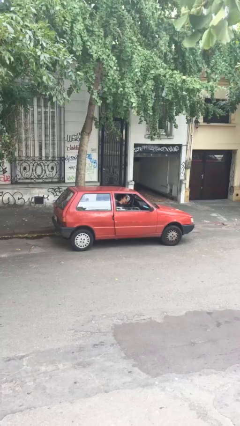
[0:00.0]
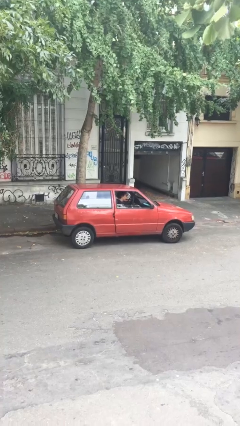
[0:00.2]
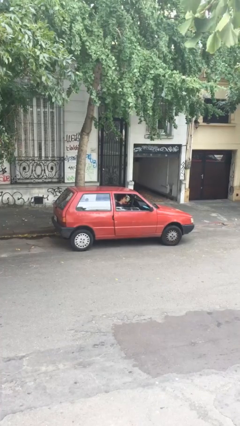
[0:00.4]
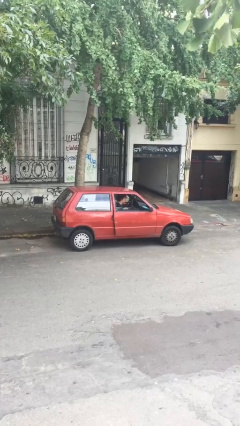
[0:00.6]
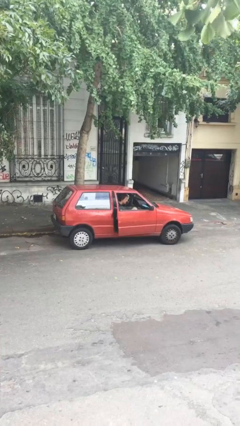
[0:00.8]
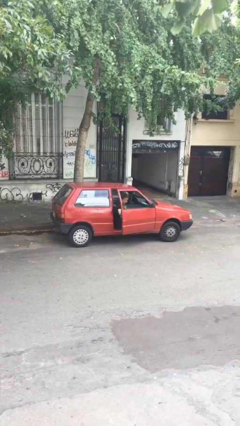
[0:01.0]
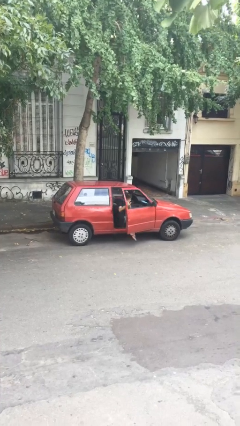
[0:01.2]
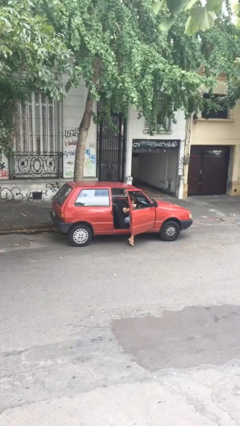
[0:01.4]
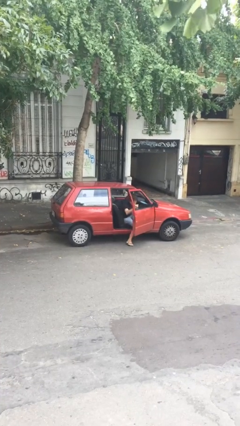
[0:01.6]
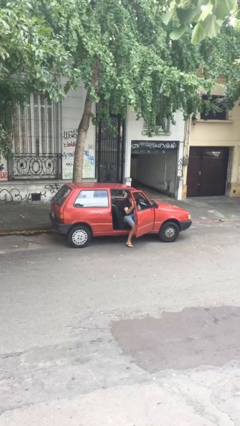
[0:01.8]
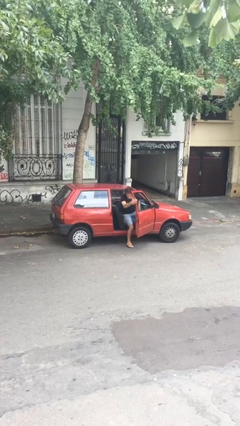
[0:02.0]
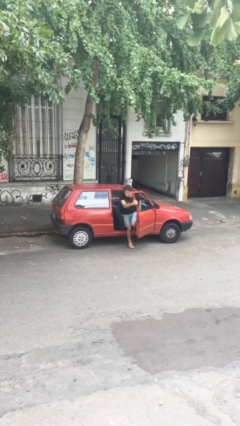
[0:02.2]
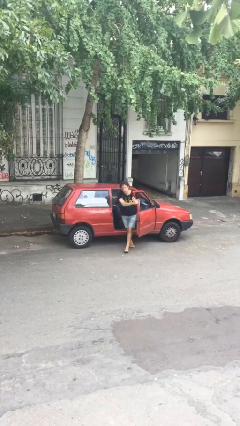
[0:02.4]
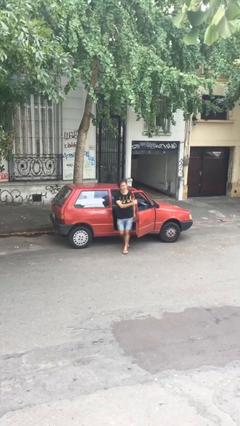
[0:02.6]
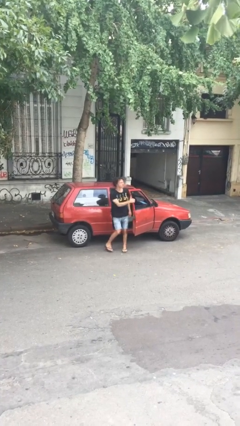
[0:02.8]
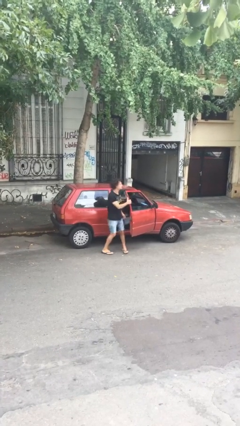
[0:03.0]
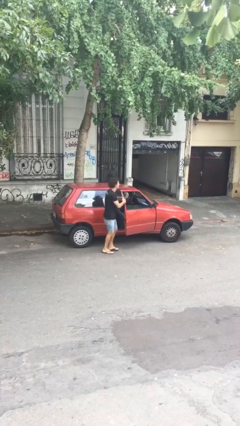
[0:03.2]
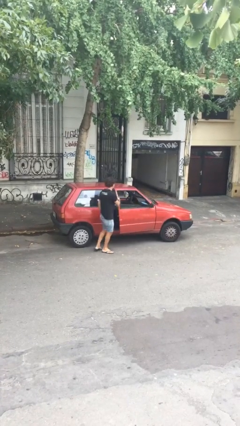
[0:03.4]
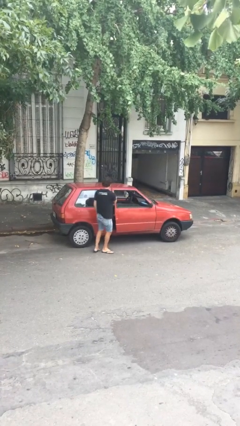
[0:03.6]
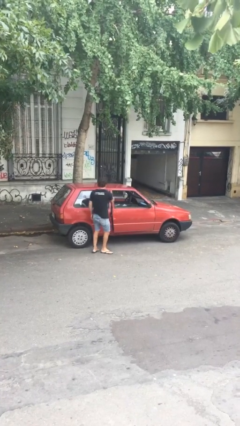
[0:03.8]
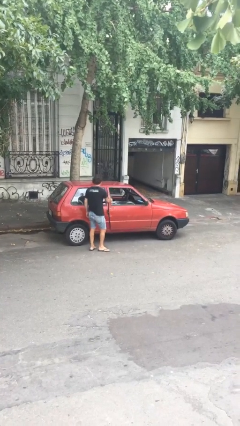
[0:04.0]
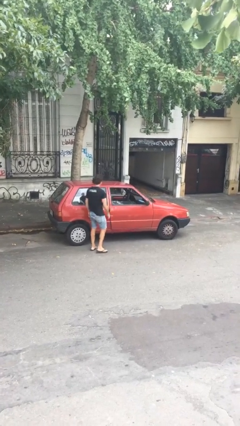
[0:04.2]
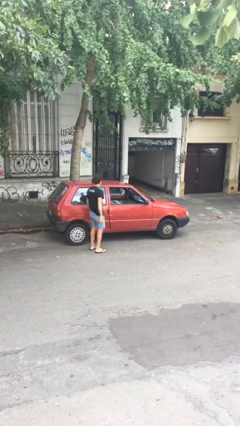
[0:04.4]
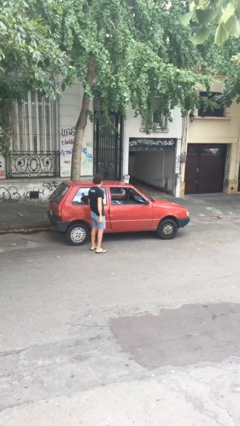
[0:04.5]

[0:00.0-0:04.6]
car drops off person

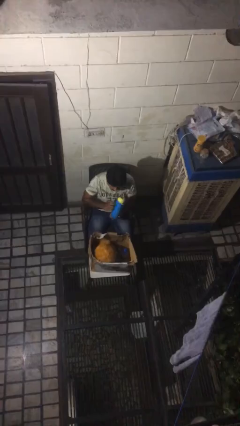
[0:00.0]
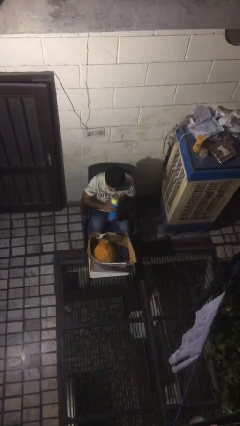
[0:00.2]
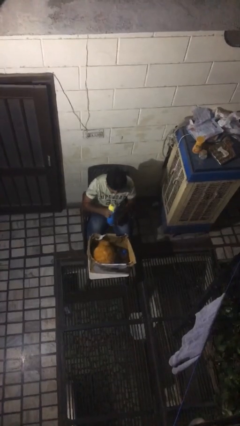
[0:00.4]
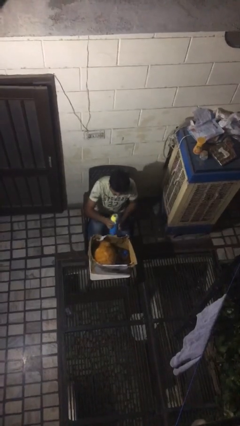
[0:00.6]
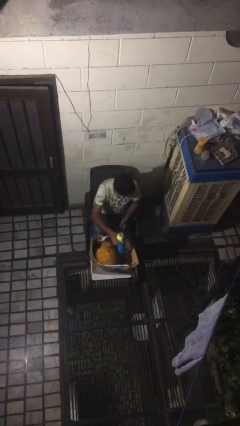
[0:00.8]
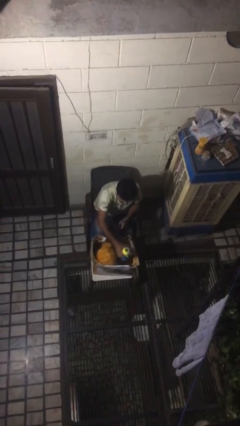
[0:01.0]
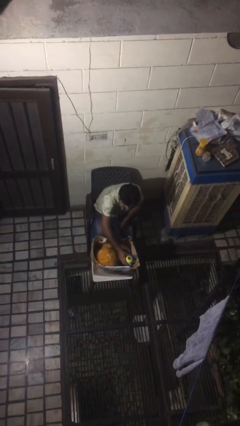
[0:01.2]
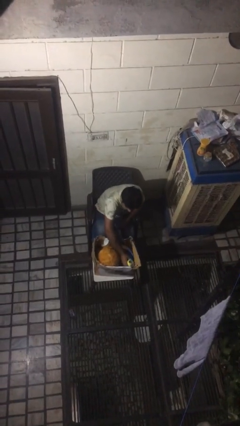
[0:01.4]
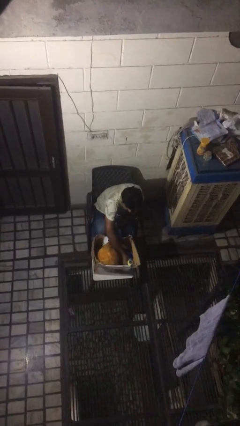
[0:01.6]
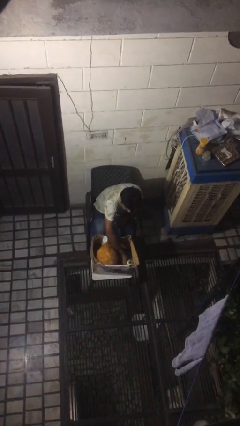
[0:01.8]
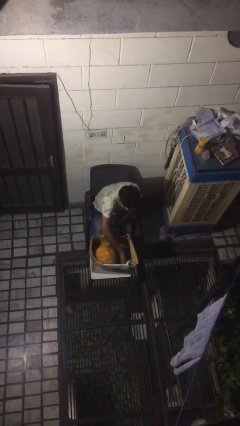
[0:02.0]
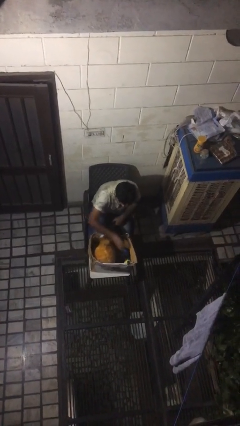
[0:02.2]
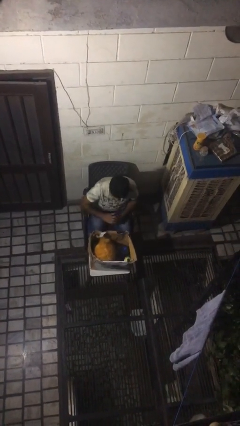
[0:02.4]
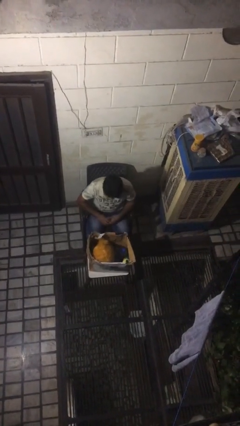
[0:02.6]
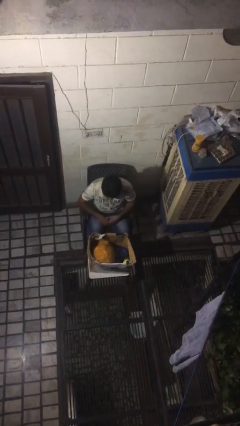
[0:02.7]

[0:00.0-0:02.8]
person puts object into box

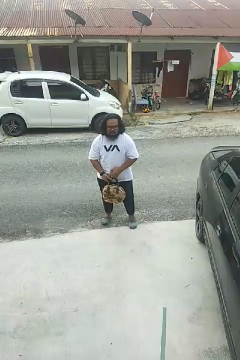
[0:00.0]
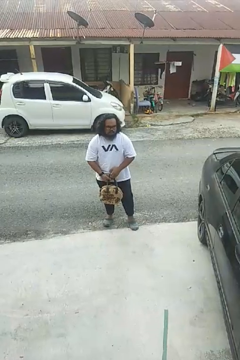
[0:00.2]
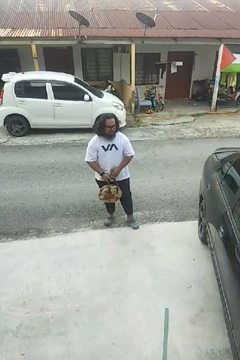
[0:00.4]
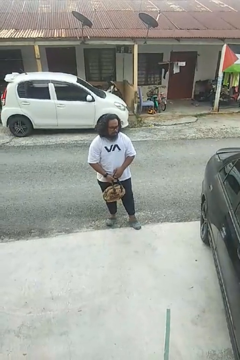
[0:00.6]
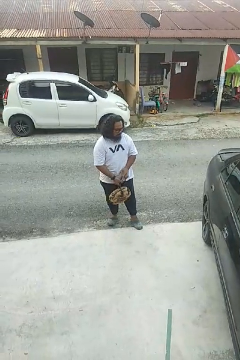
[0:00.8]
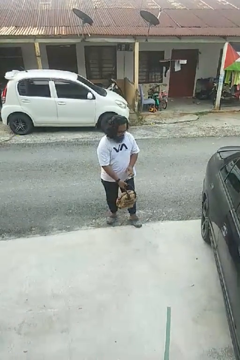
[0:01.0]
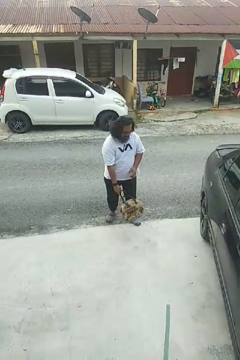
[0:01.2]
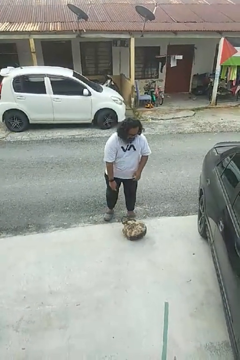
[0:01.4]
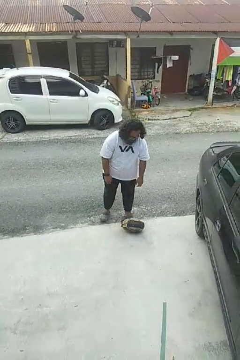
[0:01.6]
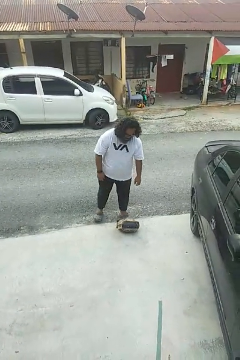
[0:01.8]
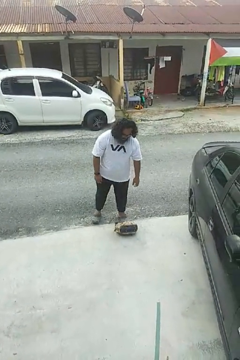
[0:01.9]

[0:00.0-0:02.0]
person drops object

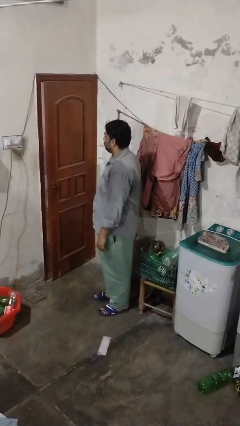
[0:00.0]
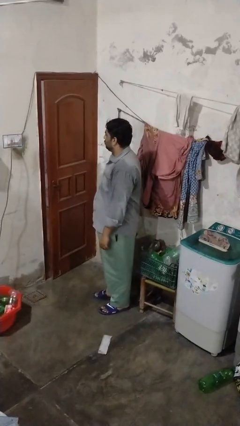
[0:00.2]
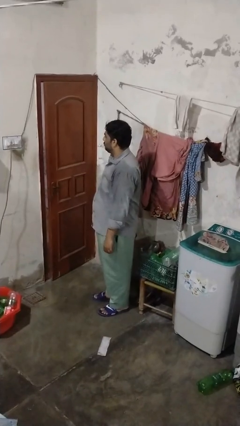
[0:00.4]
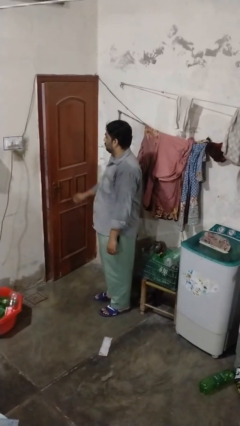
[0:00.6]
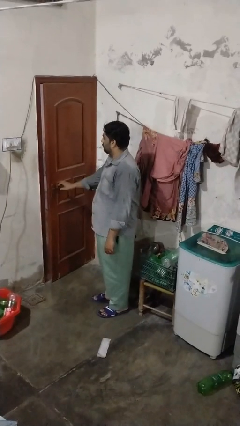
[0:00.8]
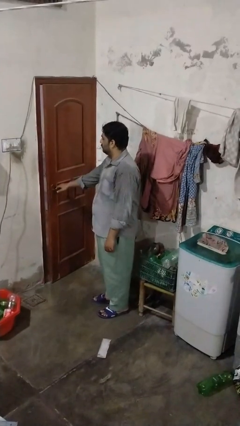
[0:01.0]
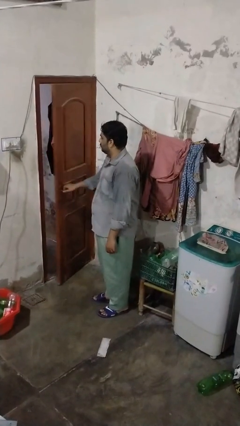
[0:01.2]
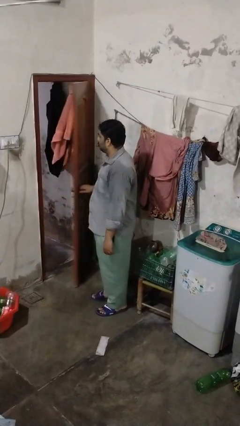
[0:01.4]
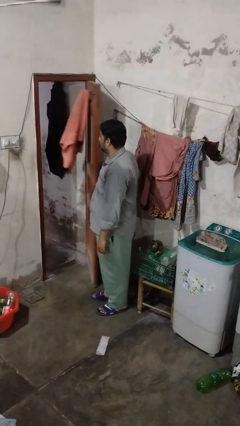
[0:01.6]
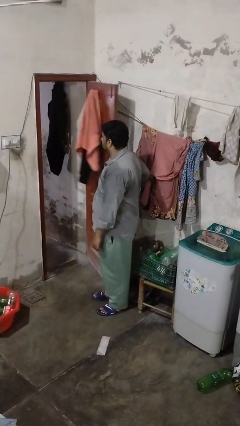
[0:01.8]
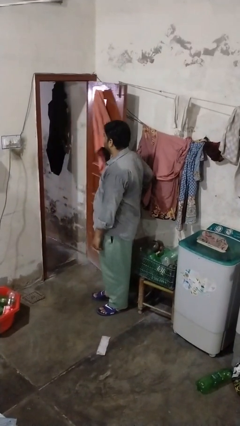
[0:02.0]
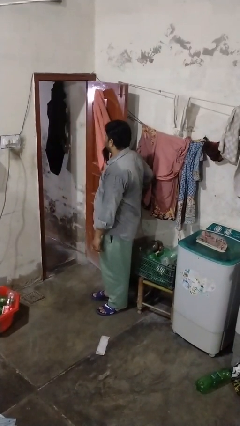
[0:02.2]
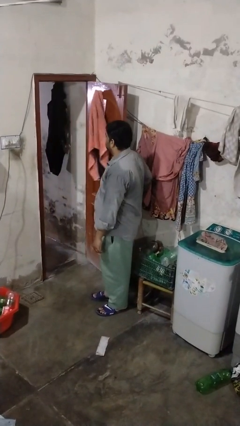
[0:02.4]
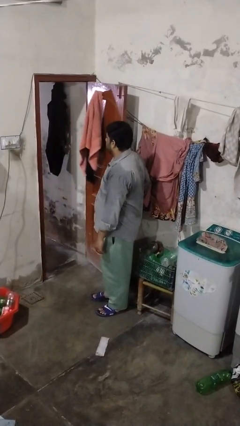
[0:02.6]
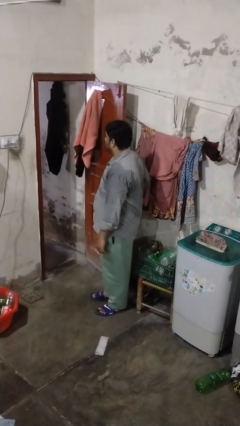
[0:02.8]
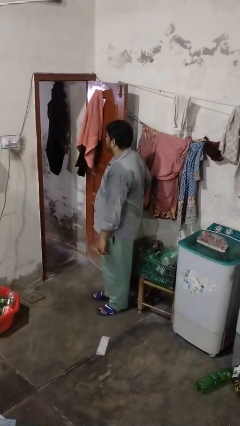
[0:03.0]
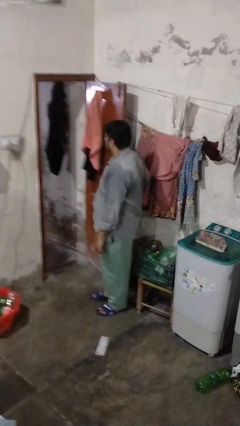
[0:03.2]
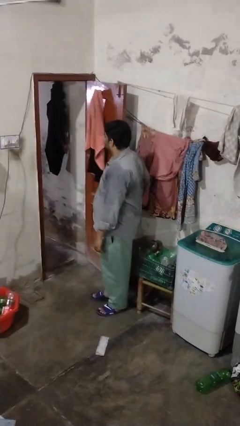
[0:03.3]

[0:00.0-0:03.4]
person opens closet door

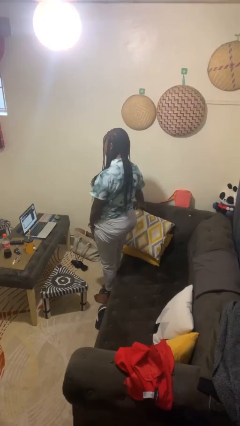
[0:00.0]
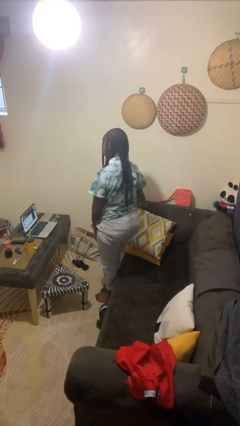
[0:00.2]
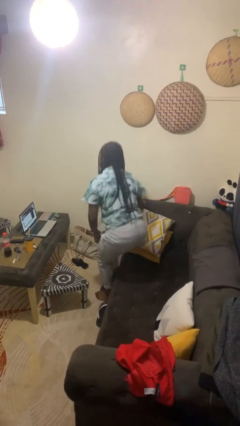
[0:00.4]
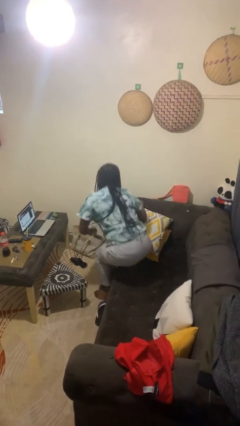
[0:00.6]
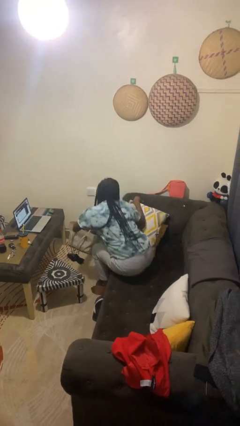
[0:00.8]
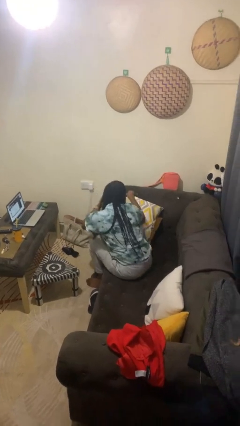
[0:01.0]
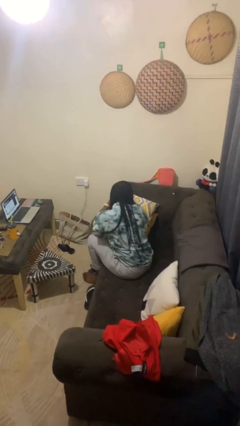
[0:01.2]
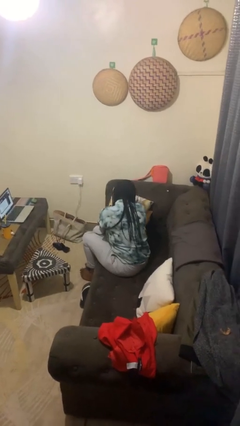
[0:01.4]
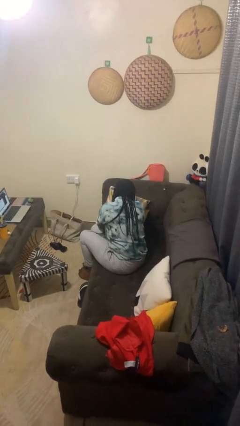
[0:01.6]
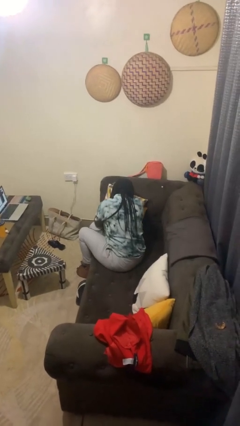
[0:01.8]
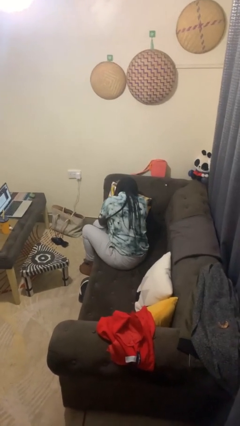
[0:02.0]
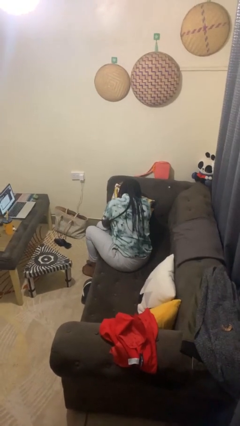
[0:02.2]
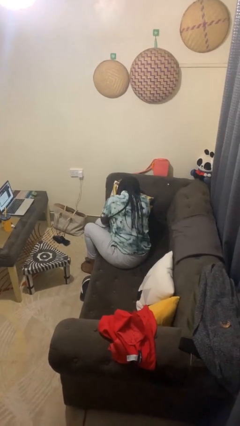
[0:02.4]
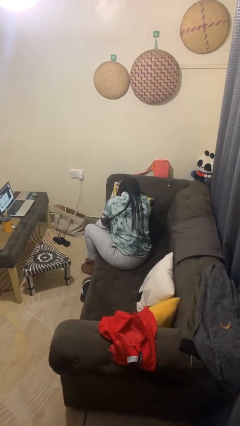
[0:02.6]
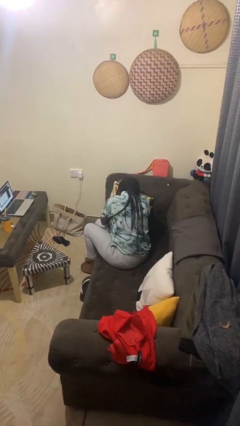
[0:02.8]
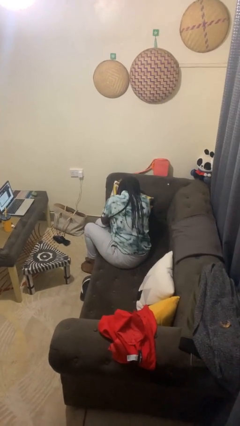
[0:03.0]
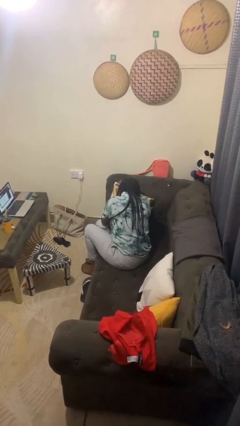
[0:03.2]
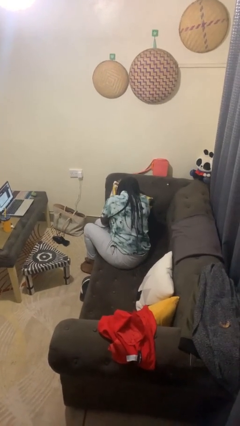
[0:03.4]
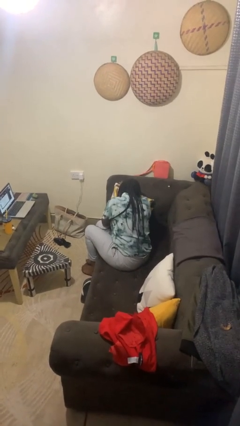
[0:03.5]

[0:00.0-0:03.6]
person lies down on couch

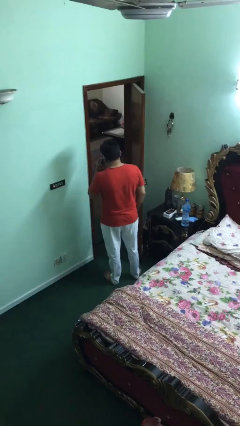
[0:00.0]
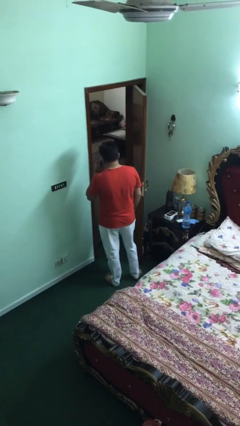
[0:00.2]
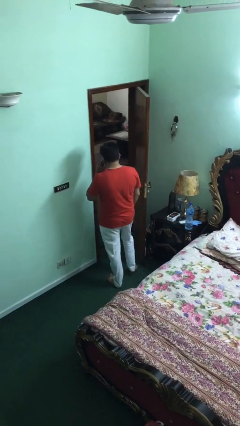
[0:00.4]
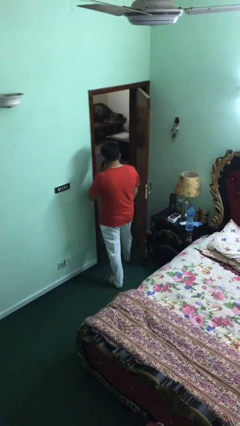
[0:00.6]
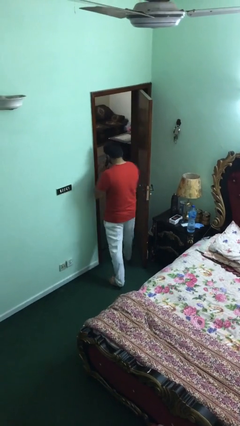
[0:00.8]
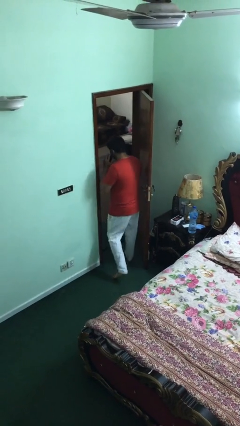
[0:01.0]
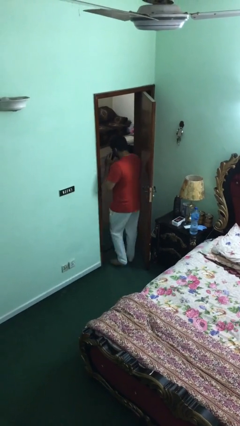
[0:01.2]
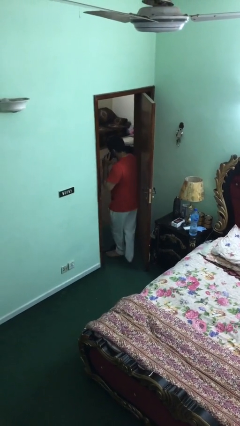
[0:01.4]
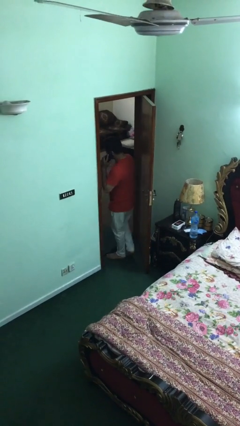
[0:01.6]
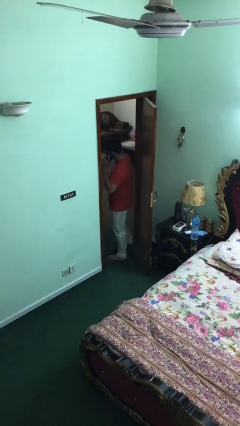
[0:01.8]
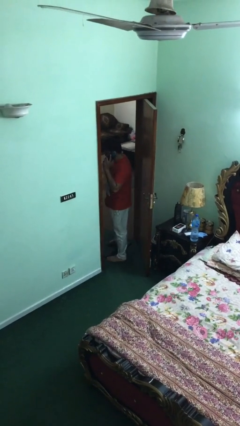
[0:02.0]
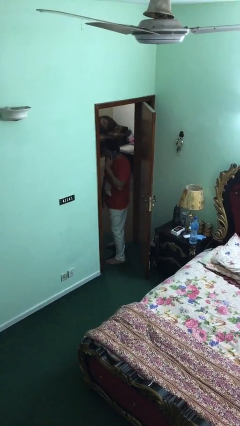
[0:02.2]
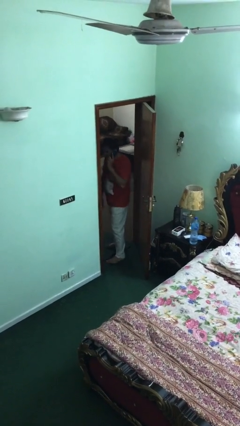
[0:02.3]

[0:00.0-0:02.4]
person exits scene through structure
